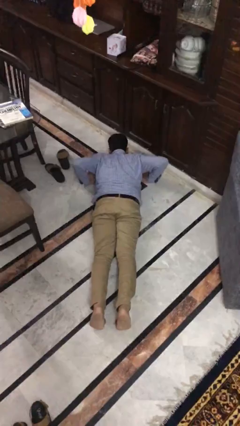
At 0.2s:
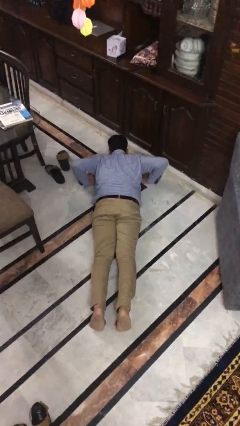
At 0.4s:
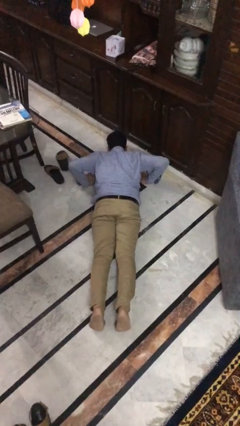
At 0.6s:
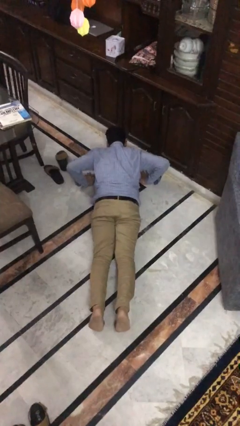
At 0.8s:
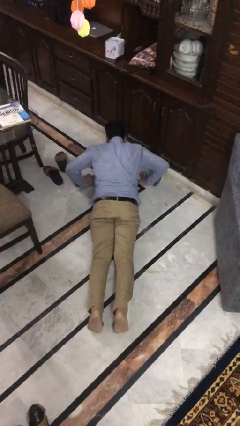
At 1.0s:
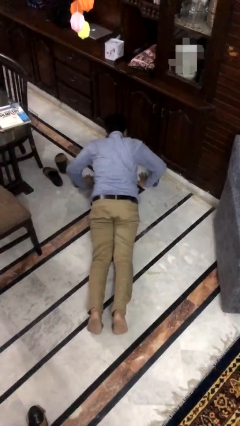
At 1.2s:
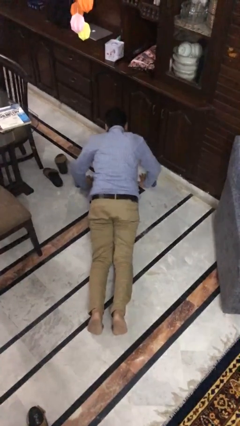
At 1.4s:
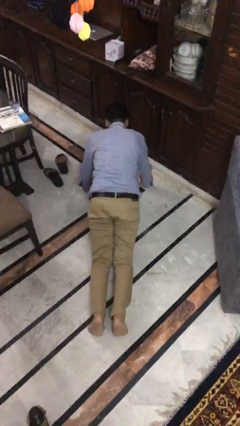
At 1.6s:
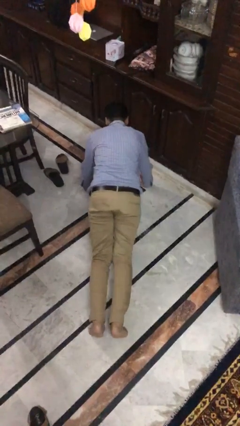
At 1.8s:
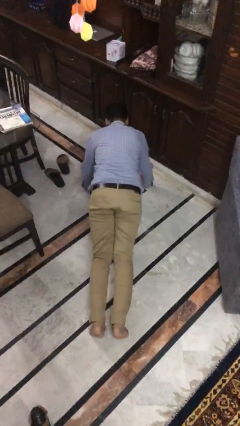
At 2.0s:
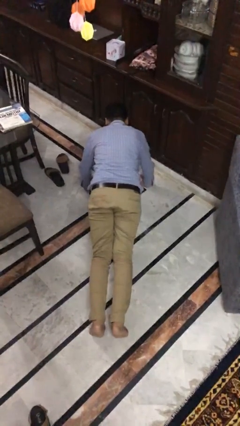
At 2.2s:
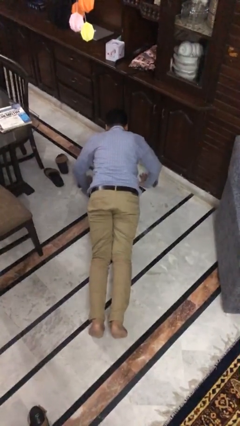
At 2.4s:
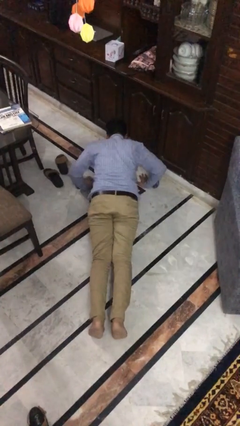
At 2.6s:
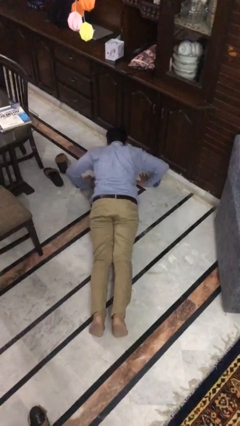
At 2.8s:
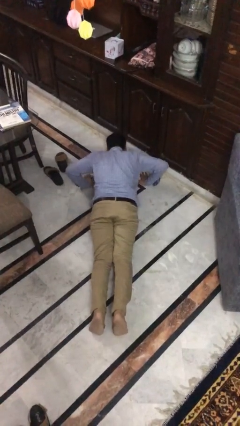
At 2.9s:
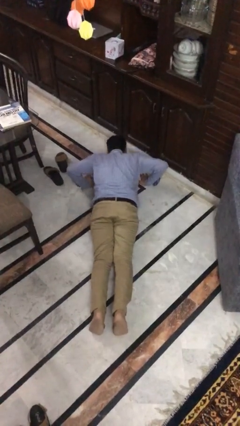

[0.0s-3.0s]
person exercises with pushup

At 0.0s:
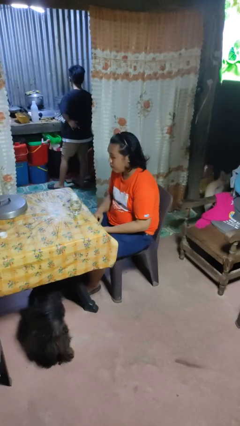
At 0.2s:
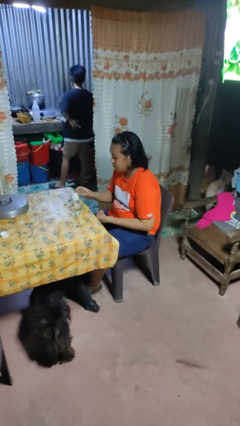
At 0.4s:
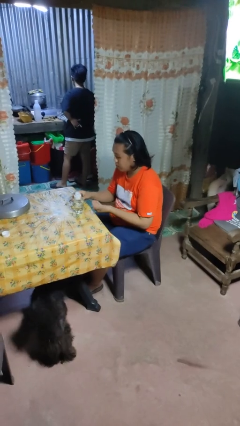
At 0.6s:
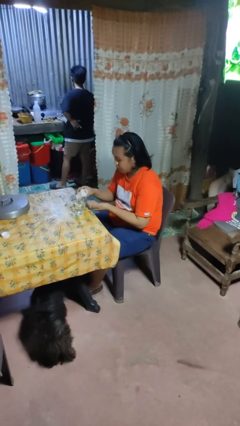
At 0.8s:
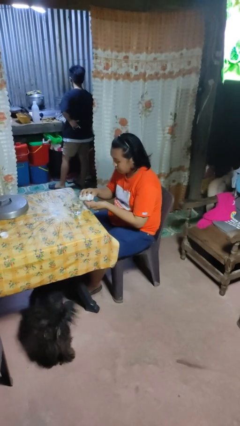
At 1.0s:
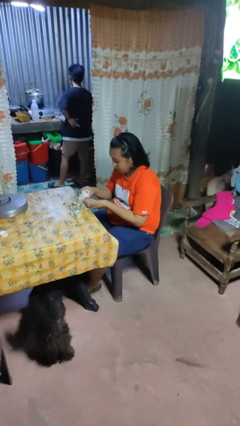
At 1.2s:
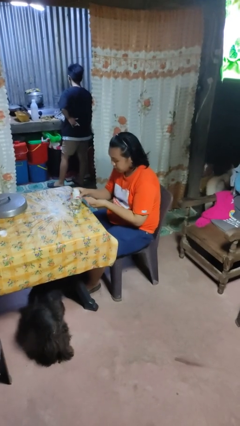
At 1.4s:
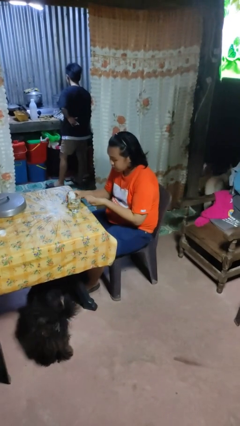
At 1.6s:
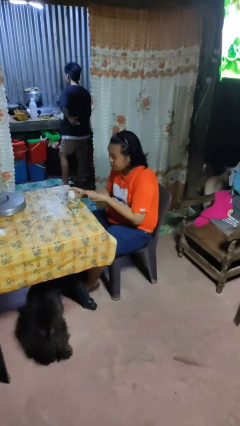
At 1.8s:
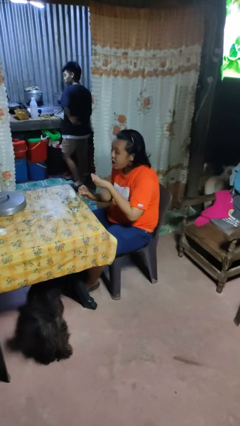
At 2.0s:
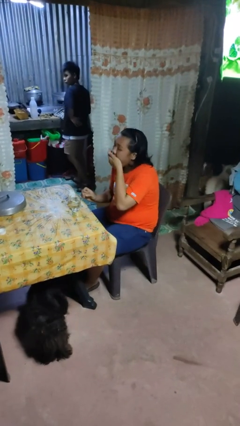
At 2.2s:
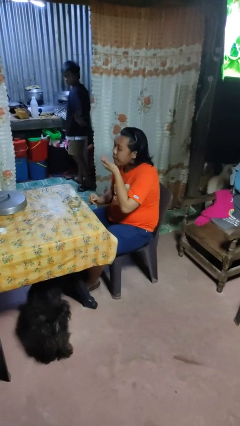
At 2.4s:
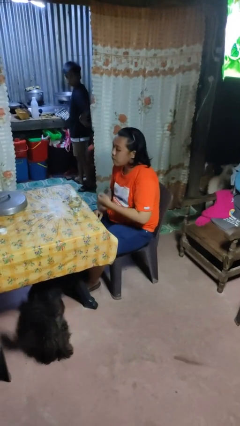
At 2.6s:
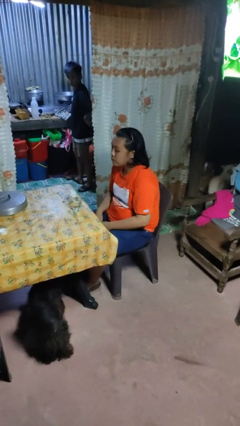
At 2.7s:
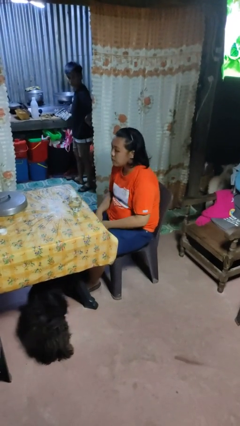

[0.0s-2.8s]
person takes medicine pills

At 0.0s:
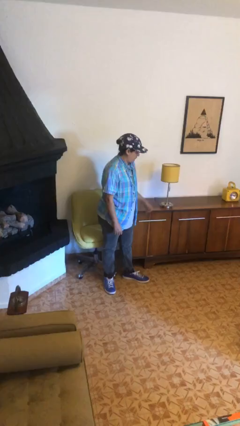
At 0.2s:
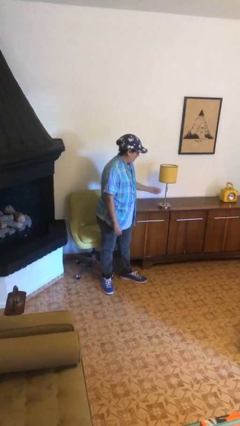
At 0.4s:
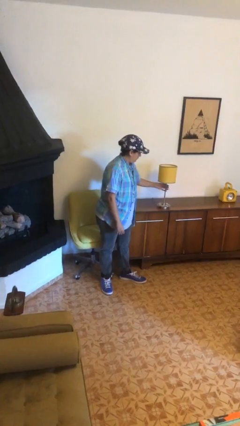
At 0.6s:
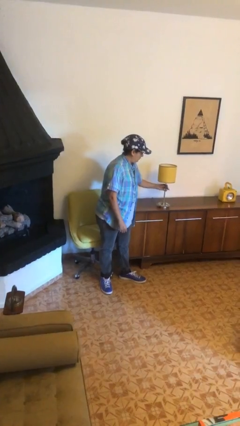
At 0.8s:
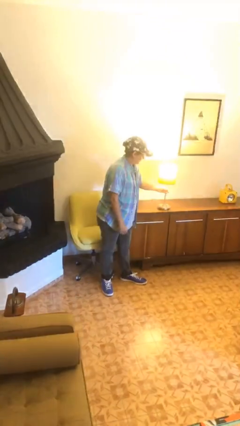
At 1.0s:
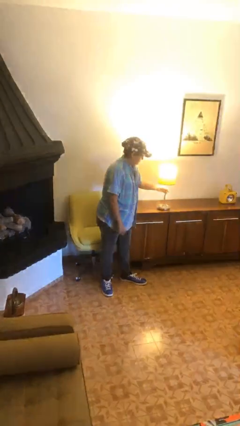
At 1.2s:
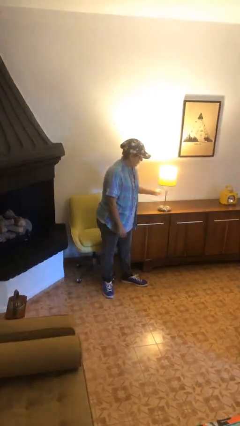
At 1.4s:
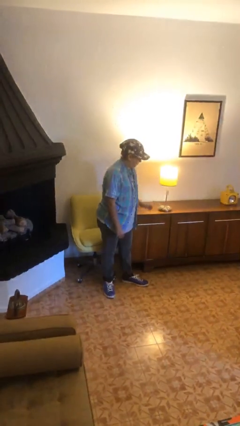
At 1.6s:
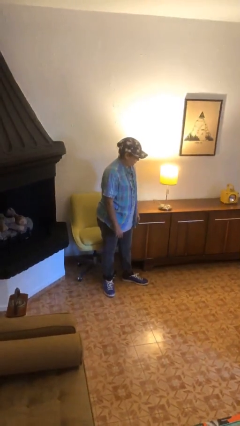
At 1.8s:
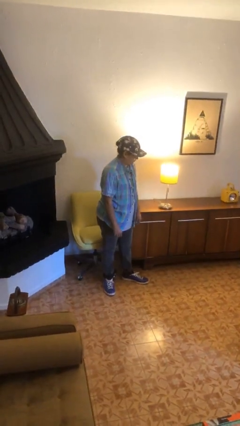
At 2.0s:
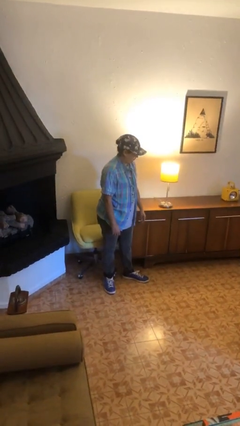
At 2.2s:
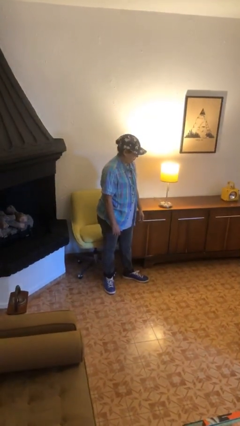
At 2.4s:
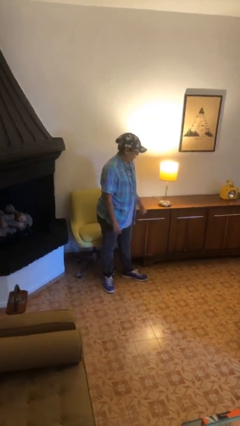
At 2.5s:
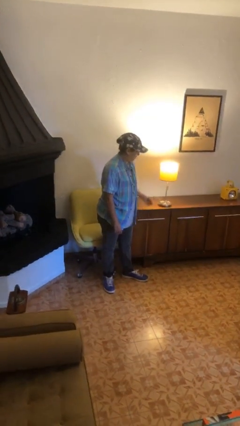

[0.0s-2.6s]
person turns on lamp

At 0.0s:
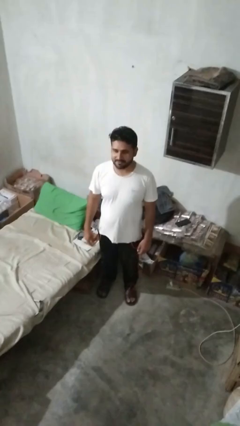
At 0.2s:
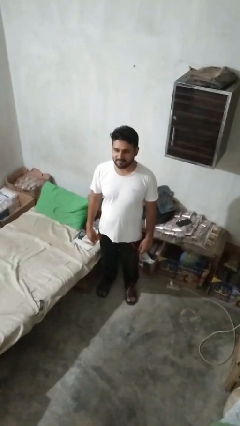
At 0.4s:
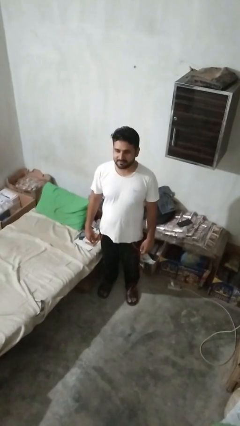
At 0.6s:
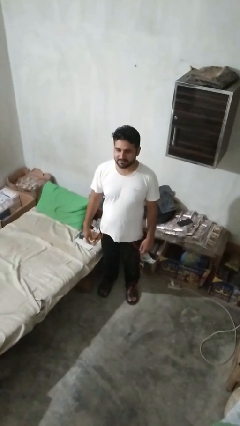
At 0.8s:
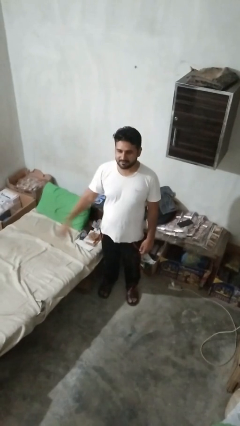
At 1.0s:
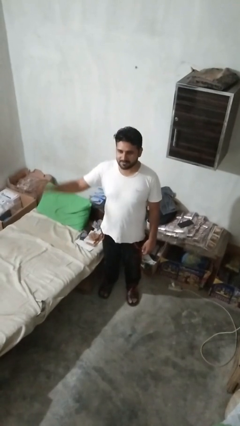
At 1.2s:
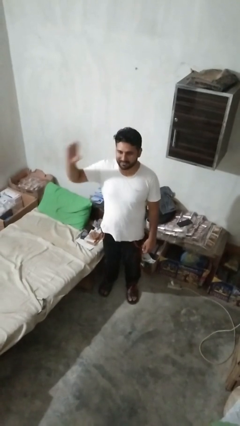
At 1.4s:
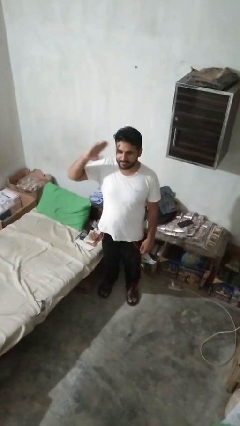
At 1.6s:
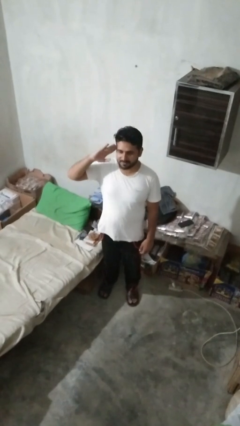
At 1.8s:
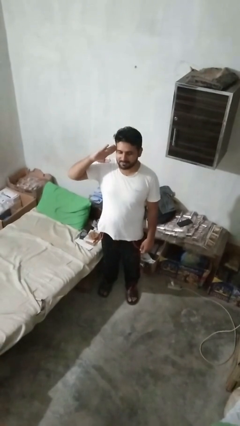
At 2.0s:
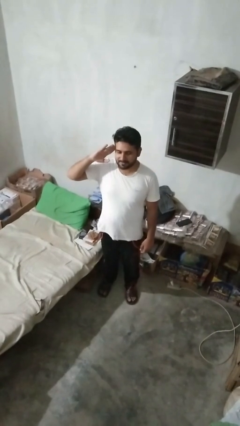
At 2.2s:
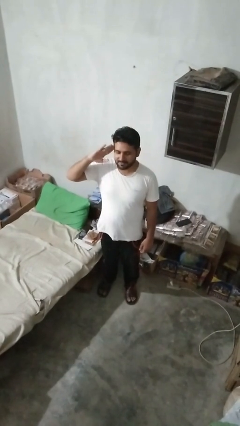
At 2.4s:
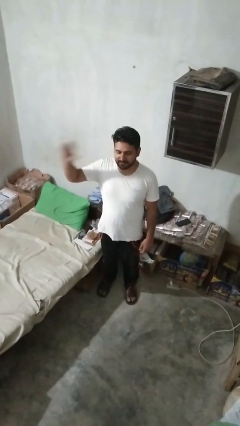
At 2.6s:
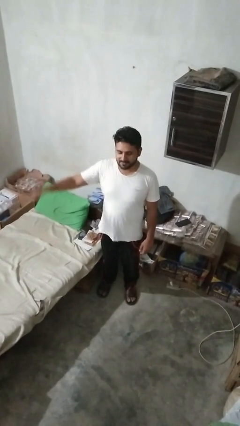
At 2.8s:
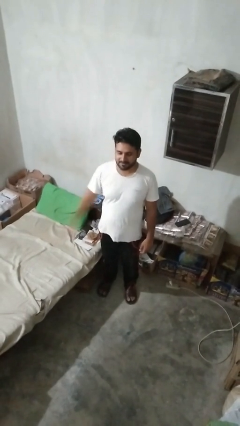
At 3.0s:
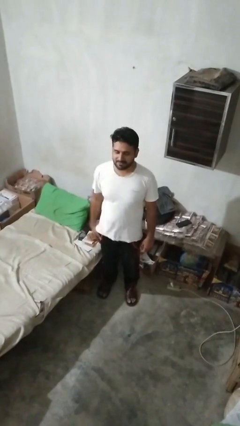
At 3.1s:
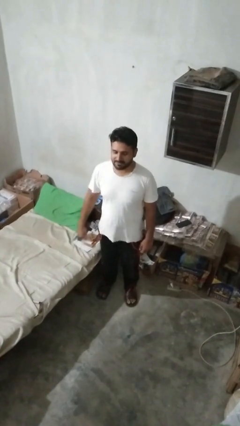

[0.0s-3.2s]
person salutes

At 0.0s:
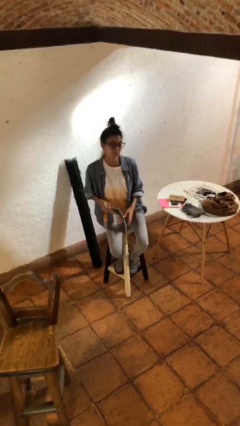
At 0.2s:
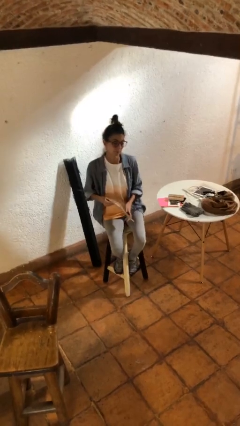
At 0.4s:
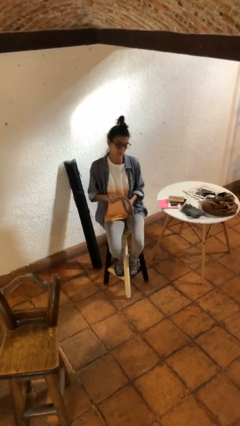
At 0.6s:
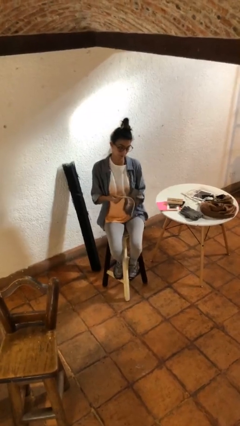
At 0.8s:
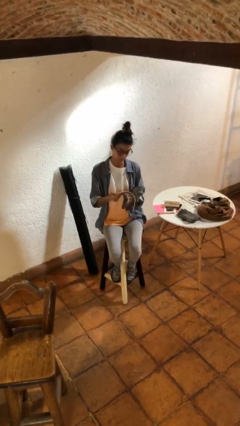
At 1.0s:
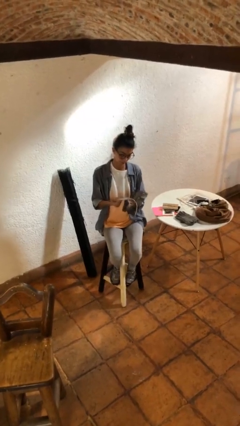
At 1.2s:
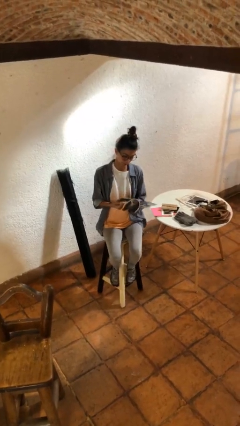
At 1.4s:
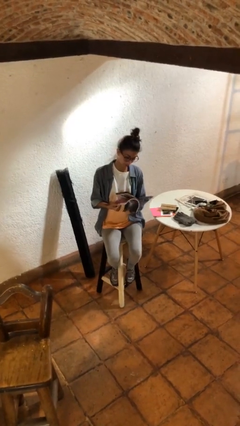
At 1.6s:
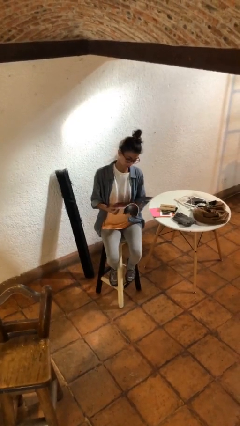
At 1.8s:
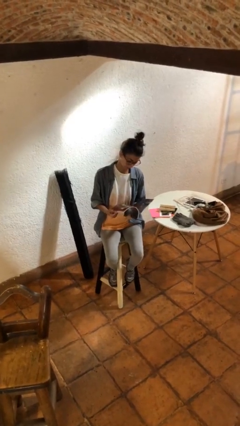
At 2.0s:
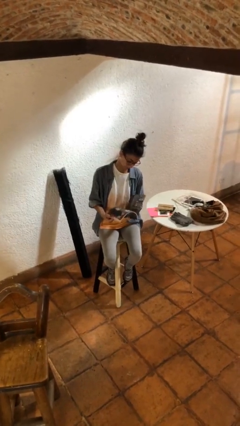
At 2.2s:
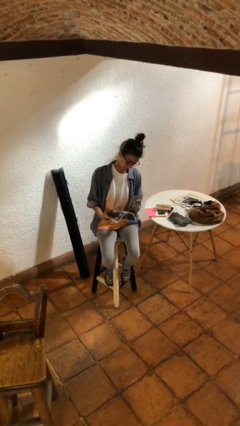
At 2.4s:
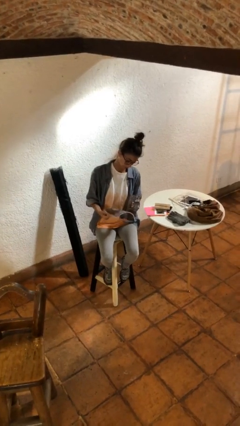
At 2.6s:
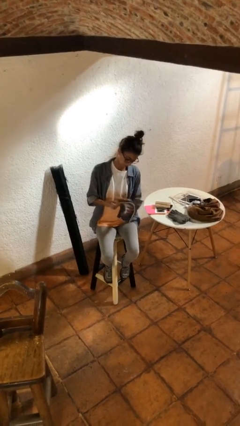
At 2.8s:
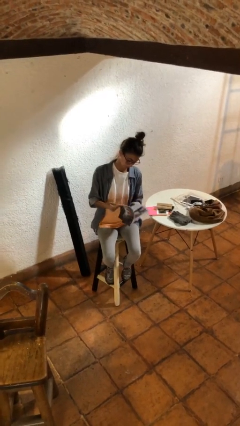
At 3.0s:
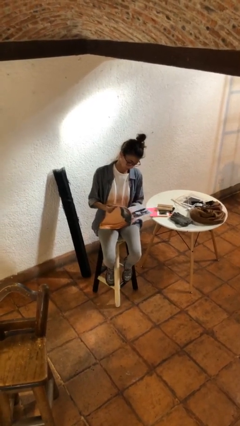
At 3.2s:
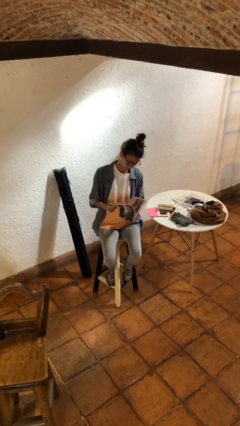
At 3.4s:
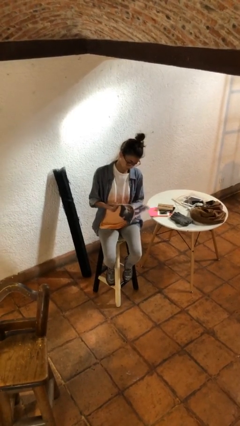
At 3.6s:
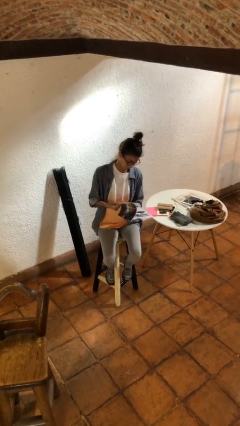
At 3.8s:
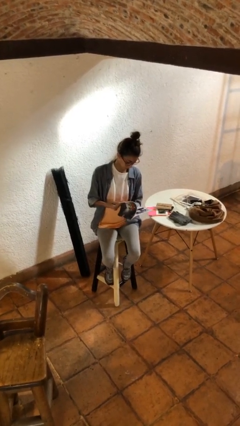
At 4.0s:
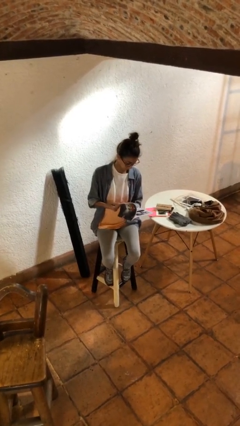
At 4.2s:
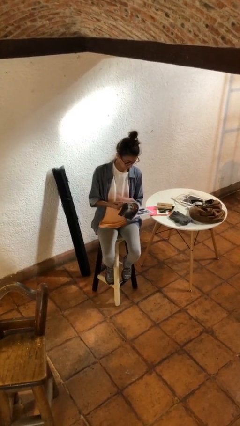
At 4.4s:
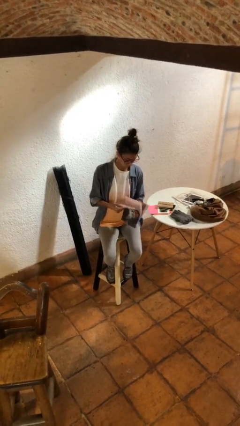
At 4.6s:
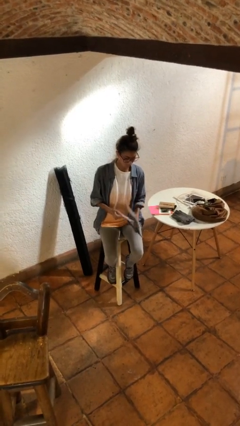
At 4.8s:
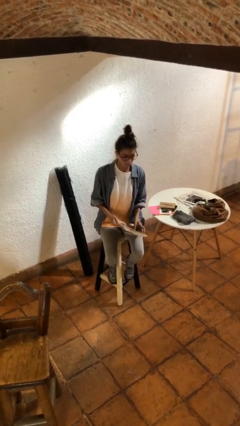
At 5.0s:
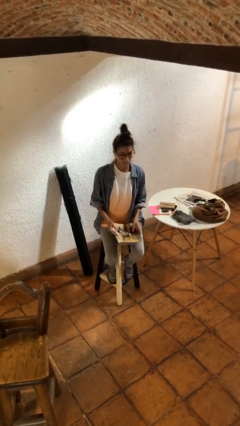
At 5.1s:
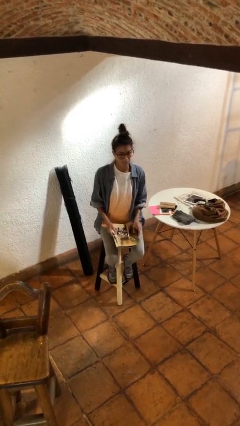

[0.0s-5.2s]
person reads magazine

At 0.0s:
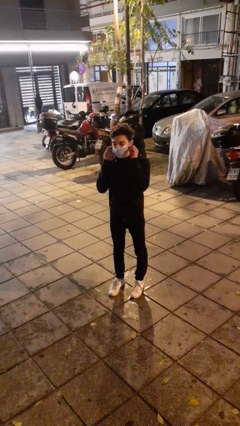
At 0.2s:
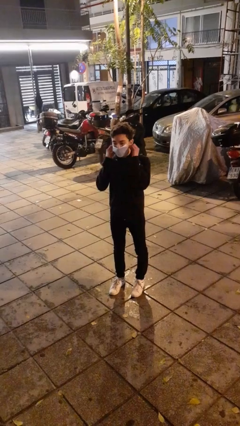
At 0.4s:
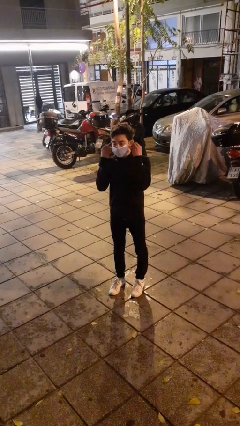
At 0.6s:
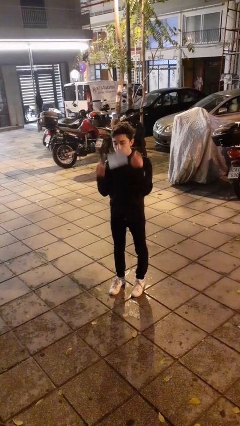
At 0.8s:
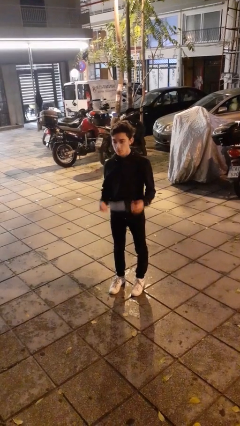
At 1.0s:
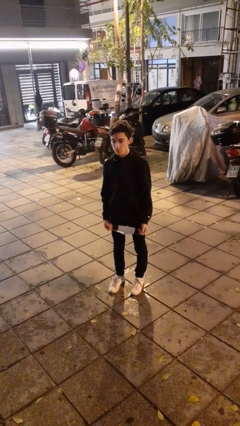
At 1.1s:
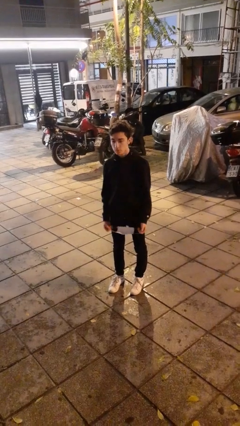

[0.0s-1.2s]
person takes off facemask
